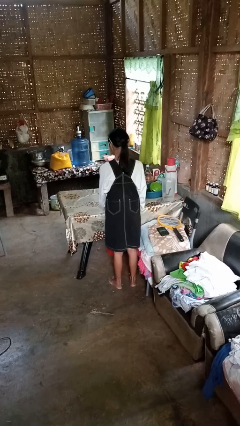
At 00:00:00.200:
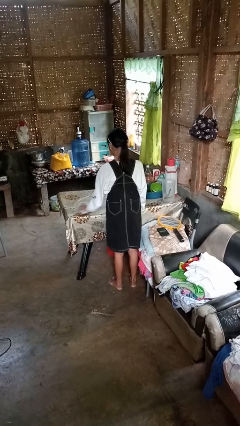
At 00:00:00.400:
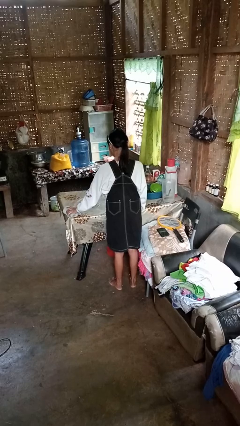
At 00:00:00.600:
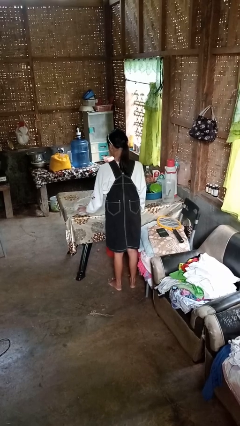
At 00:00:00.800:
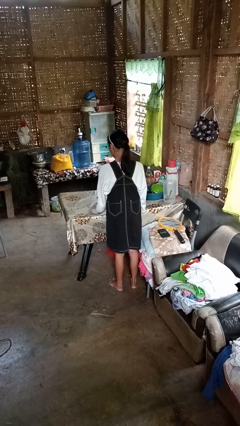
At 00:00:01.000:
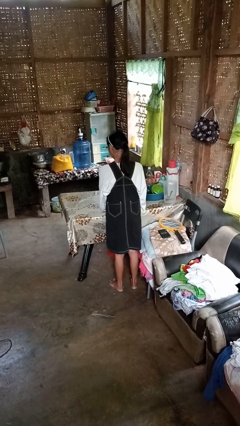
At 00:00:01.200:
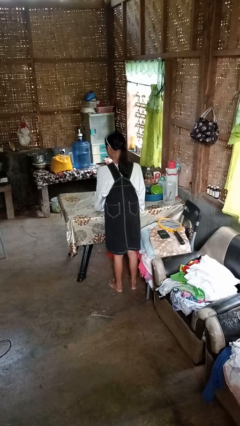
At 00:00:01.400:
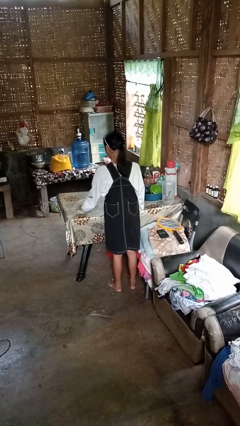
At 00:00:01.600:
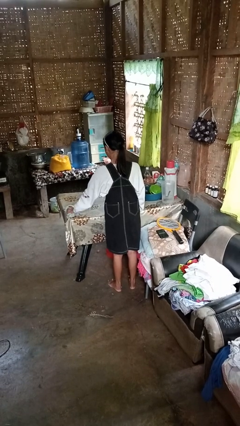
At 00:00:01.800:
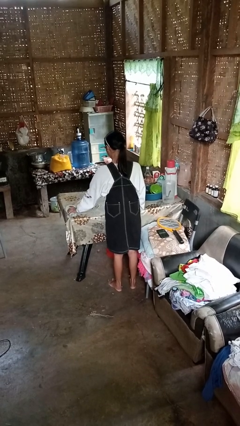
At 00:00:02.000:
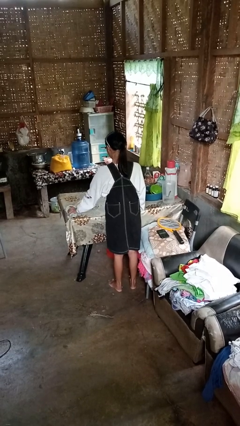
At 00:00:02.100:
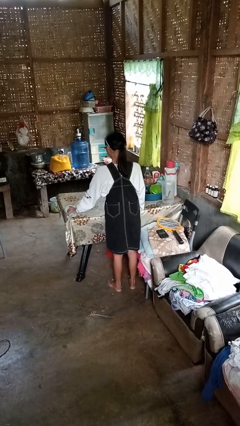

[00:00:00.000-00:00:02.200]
person cleans table with rag

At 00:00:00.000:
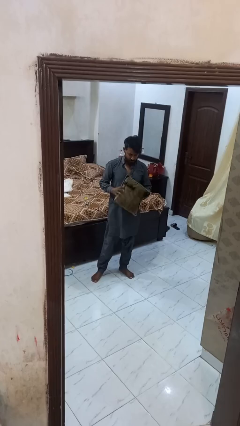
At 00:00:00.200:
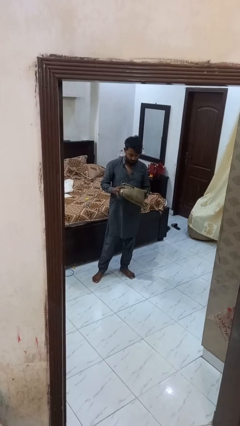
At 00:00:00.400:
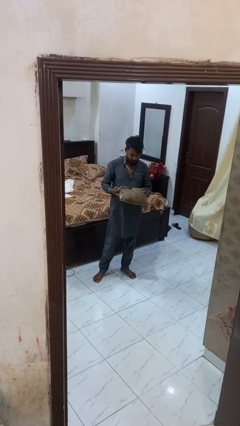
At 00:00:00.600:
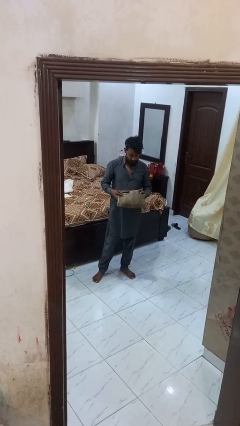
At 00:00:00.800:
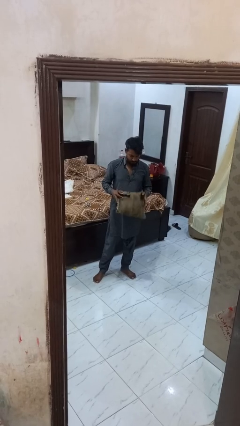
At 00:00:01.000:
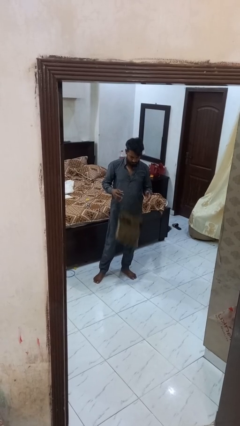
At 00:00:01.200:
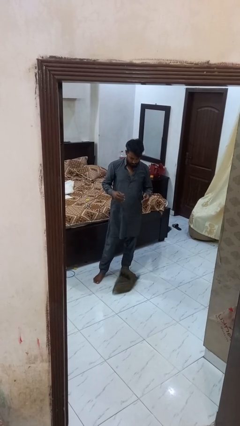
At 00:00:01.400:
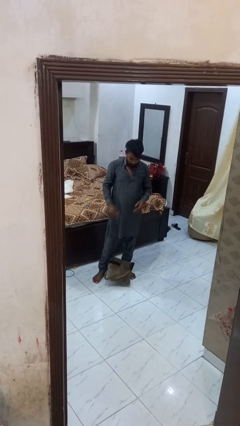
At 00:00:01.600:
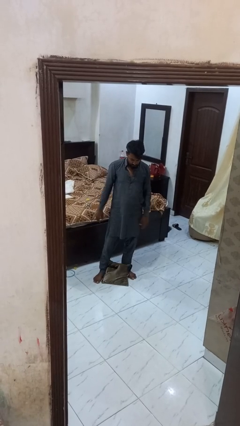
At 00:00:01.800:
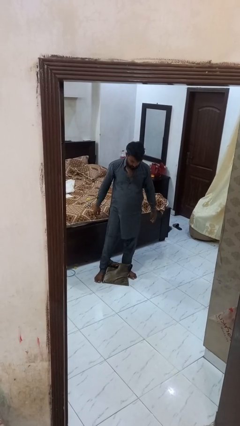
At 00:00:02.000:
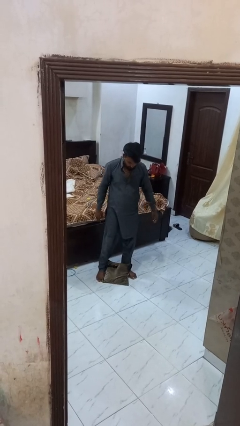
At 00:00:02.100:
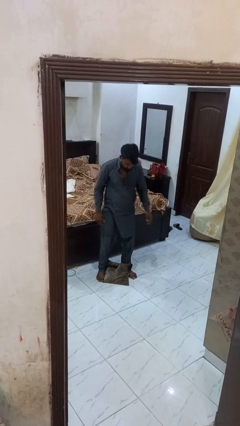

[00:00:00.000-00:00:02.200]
person drops object

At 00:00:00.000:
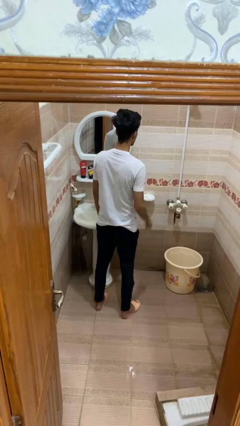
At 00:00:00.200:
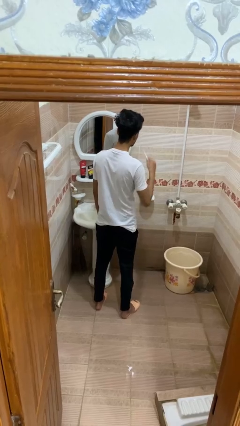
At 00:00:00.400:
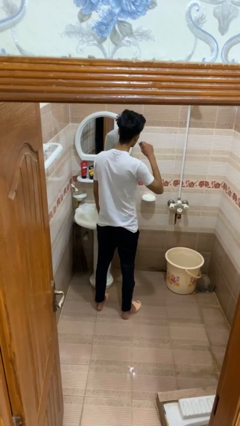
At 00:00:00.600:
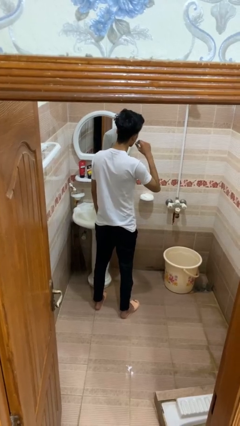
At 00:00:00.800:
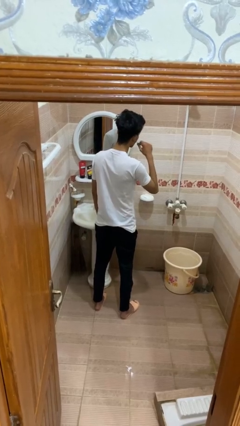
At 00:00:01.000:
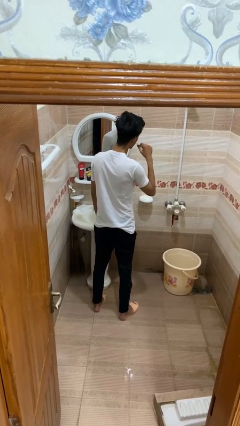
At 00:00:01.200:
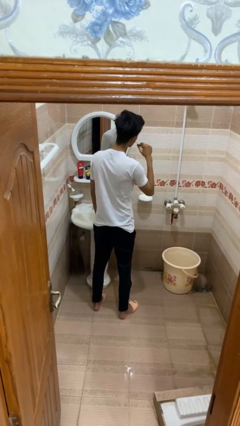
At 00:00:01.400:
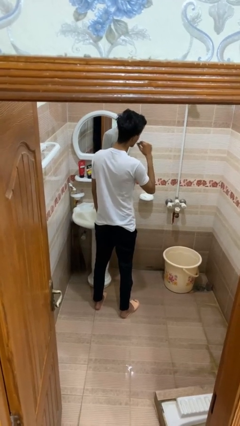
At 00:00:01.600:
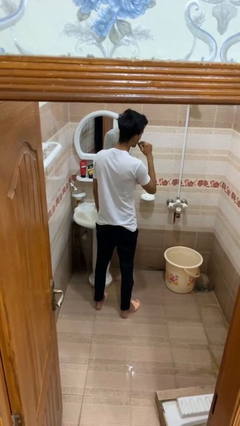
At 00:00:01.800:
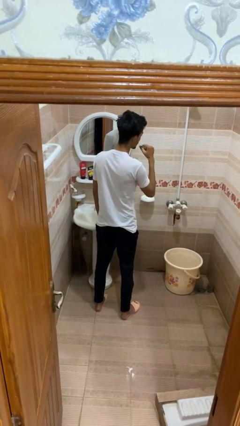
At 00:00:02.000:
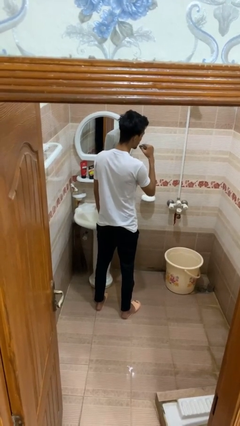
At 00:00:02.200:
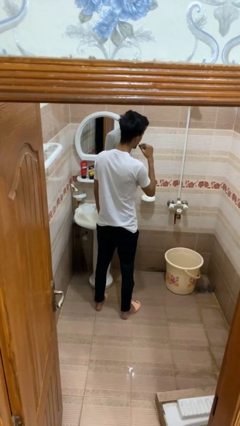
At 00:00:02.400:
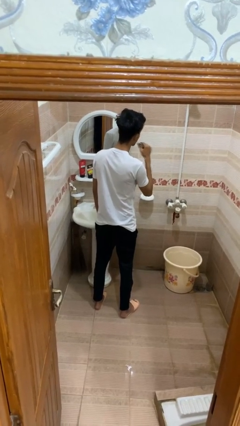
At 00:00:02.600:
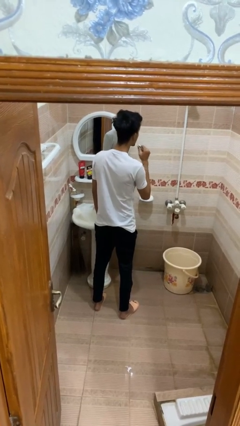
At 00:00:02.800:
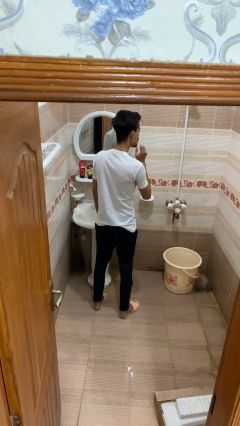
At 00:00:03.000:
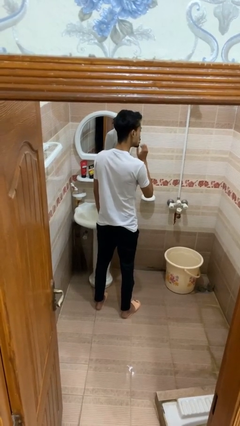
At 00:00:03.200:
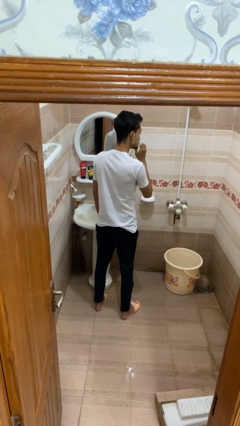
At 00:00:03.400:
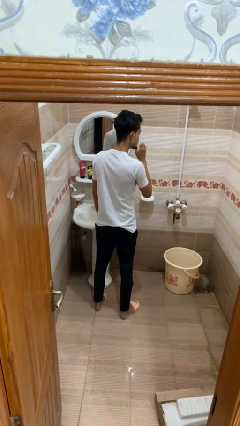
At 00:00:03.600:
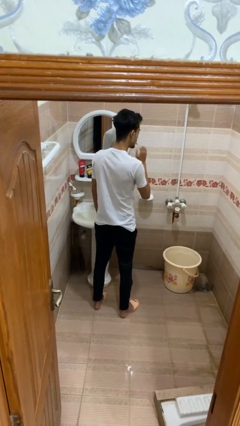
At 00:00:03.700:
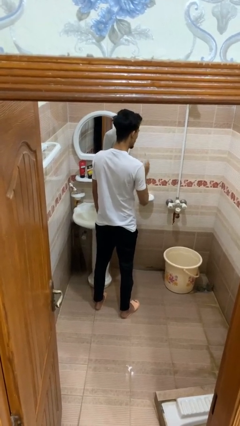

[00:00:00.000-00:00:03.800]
person brushes teeth

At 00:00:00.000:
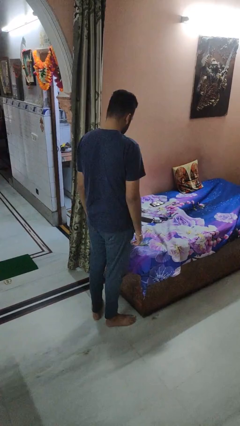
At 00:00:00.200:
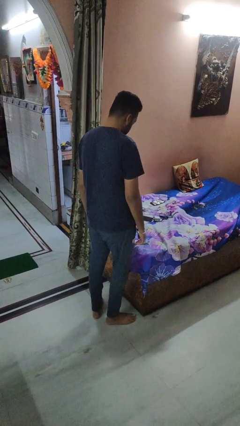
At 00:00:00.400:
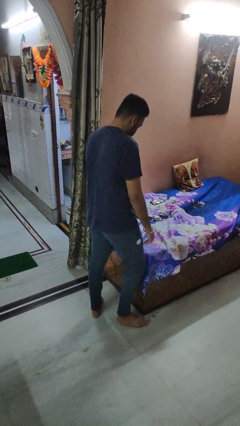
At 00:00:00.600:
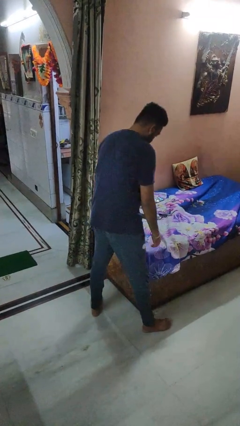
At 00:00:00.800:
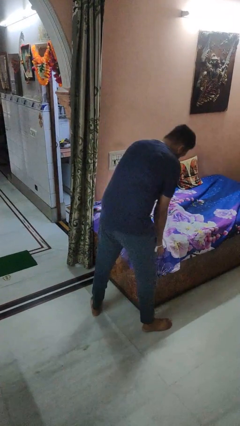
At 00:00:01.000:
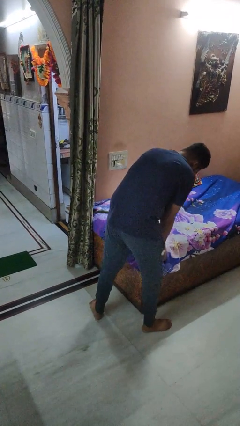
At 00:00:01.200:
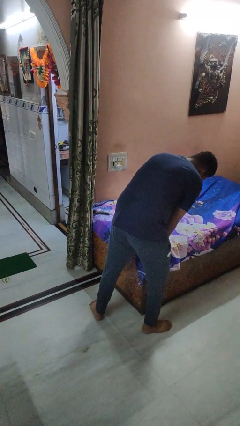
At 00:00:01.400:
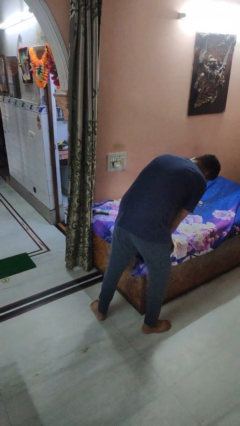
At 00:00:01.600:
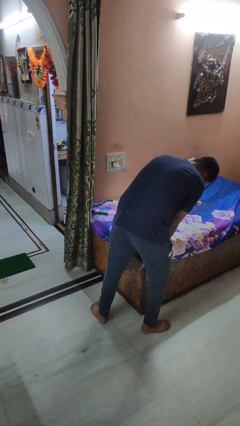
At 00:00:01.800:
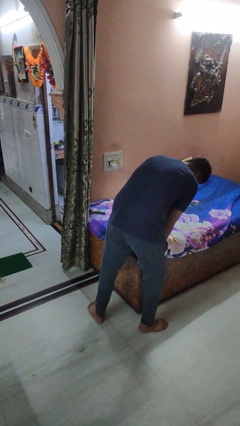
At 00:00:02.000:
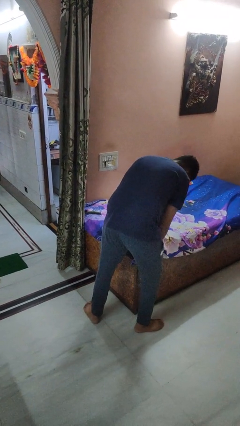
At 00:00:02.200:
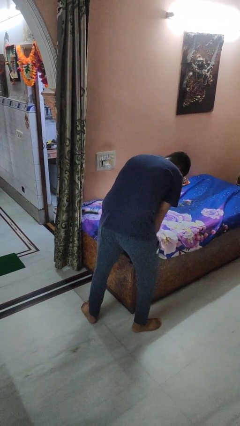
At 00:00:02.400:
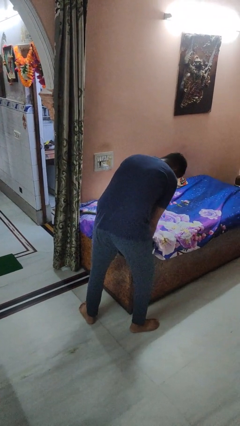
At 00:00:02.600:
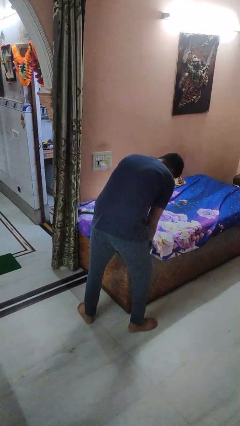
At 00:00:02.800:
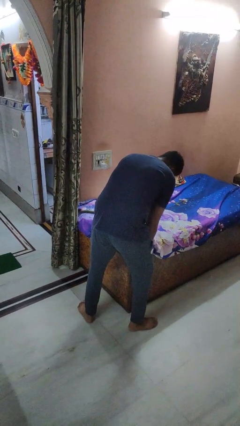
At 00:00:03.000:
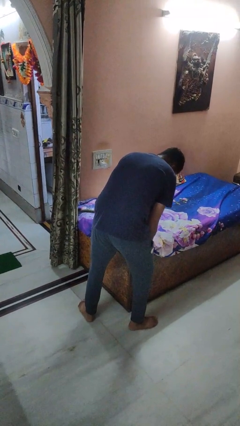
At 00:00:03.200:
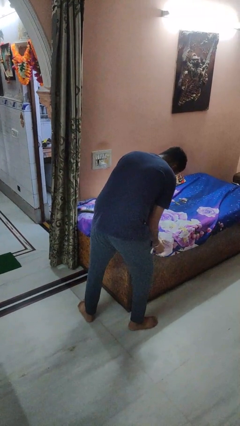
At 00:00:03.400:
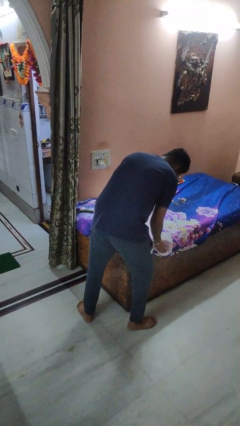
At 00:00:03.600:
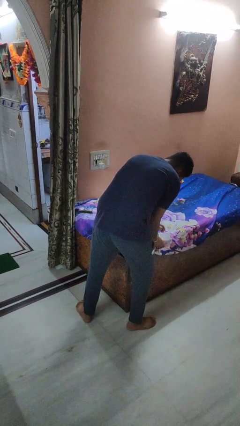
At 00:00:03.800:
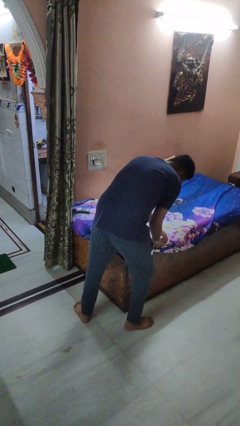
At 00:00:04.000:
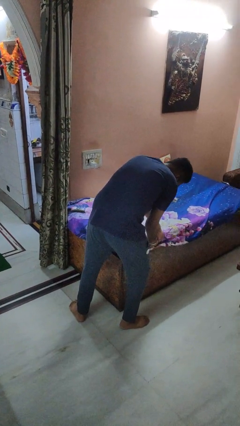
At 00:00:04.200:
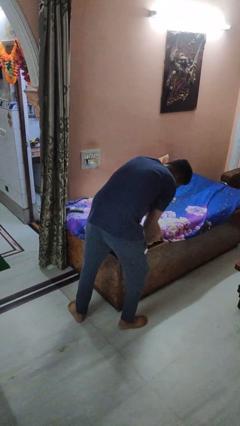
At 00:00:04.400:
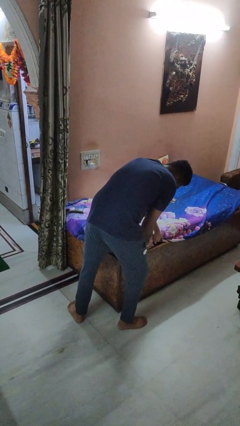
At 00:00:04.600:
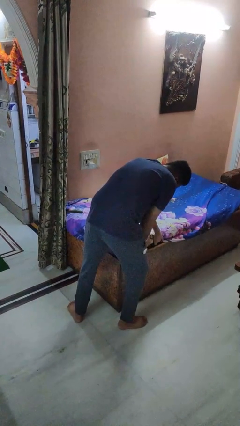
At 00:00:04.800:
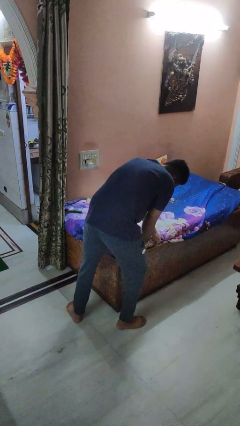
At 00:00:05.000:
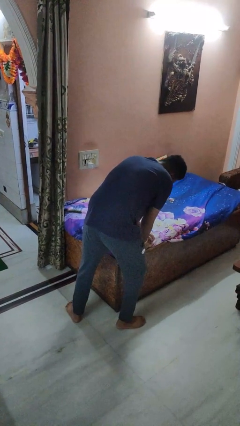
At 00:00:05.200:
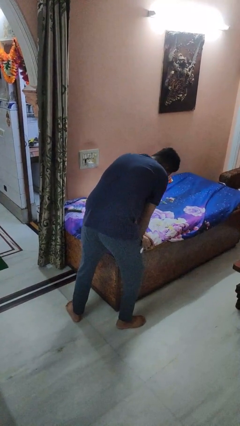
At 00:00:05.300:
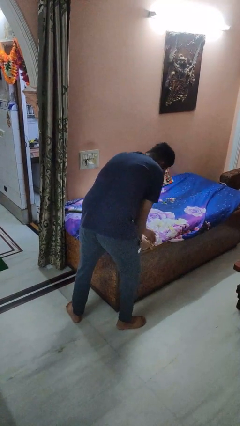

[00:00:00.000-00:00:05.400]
person makes bed

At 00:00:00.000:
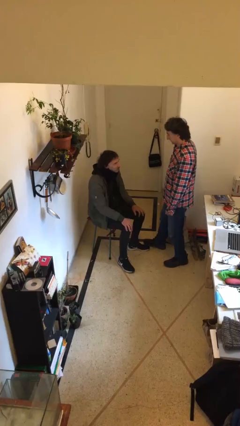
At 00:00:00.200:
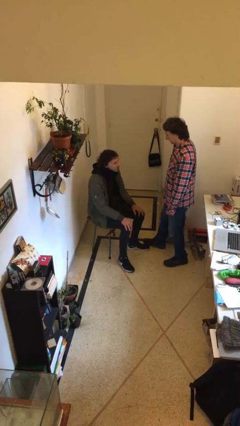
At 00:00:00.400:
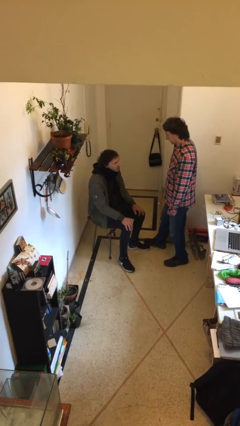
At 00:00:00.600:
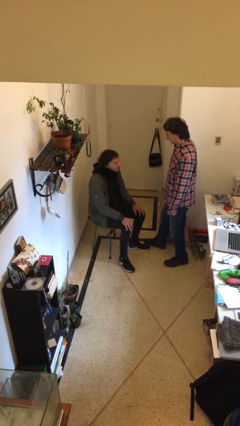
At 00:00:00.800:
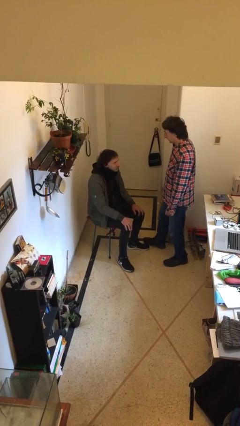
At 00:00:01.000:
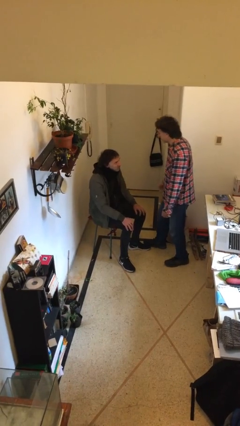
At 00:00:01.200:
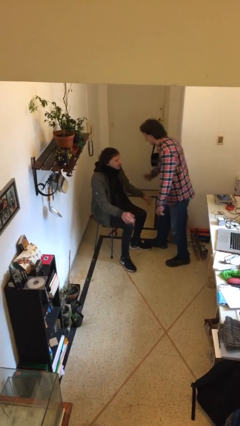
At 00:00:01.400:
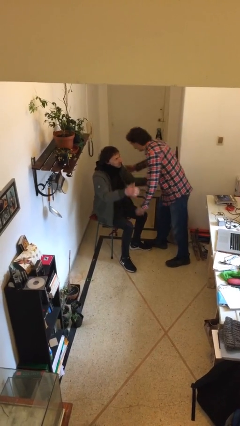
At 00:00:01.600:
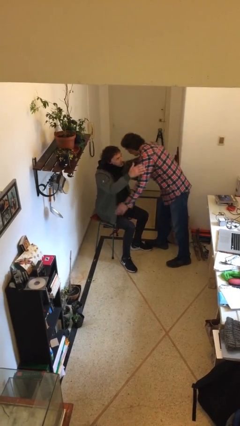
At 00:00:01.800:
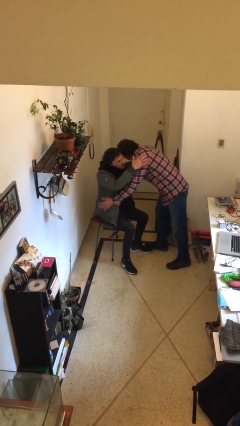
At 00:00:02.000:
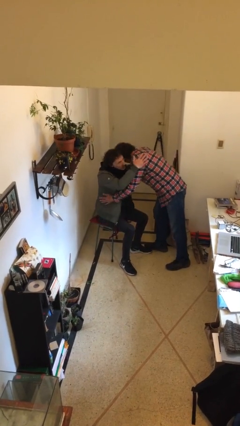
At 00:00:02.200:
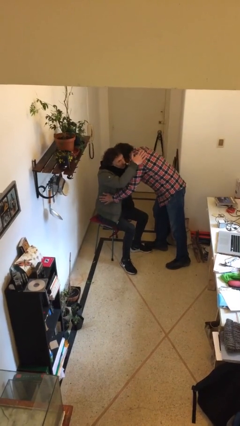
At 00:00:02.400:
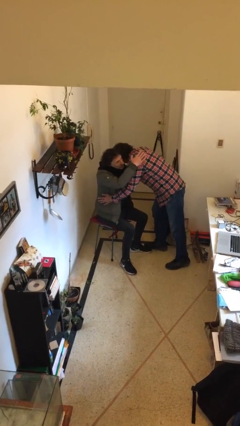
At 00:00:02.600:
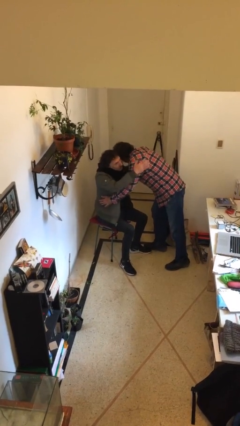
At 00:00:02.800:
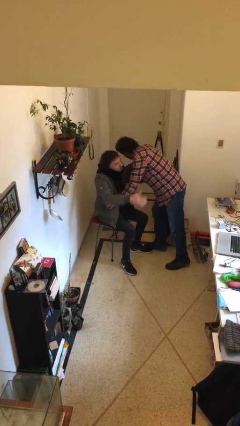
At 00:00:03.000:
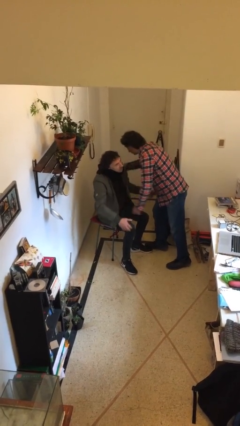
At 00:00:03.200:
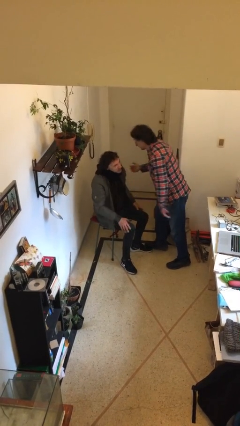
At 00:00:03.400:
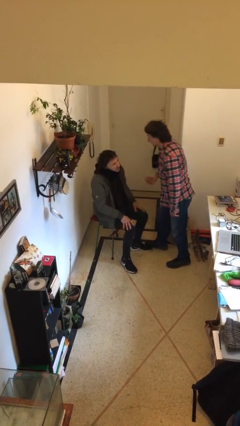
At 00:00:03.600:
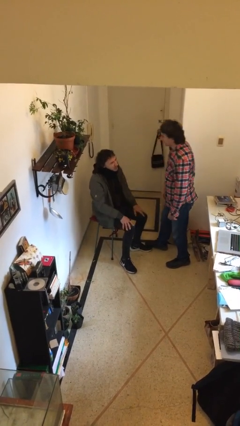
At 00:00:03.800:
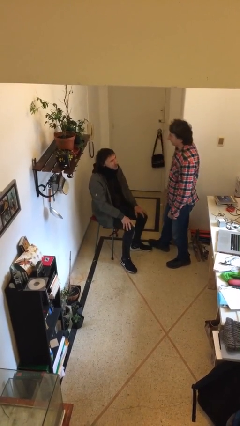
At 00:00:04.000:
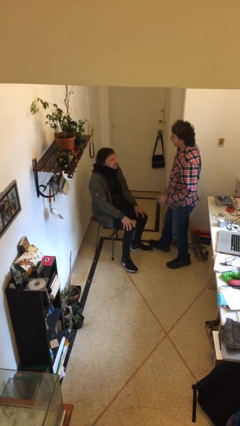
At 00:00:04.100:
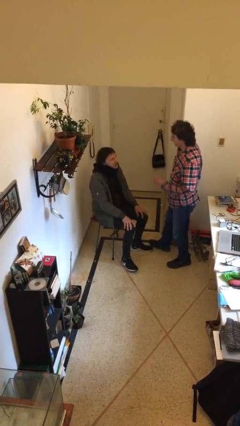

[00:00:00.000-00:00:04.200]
person embraces person
